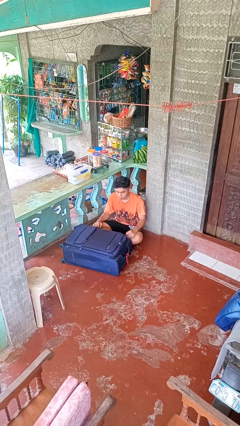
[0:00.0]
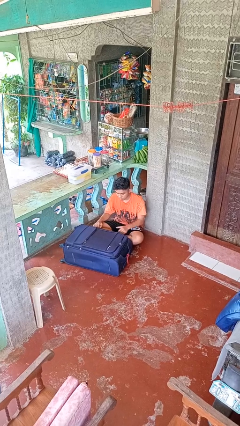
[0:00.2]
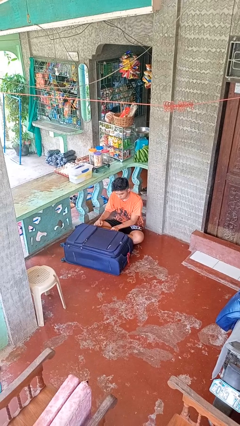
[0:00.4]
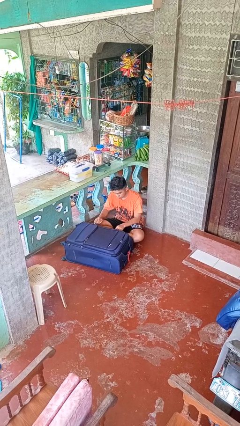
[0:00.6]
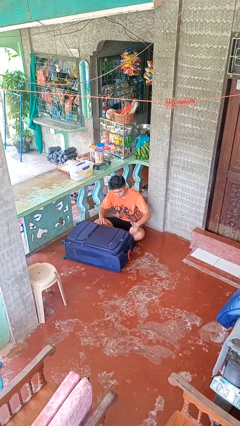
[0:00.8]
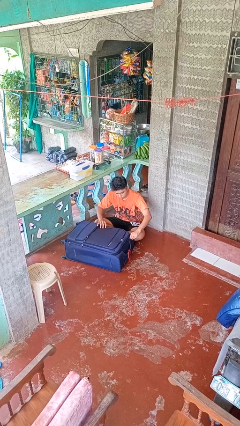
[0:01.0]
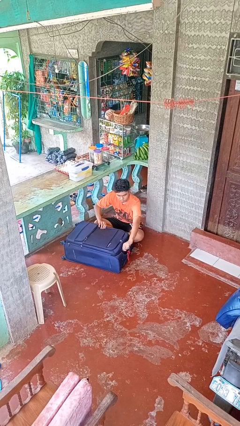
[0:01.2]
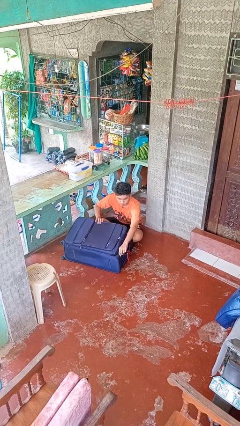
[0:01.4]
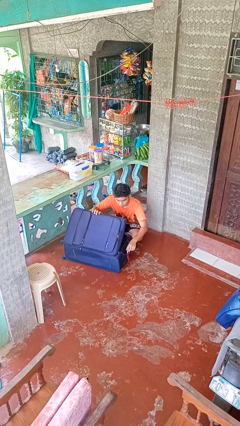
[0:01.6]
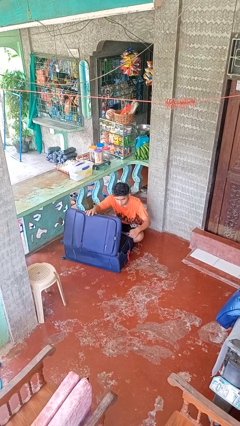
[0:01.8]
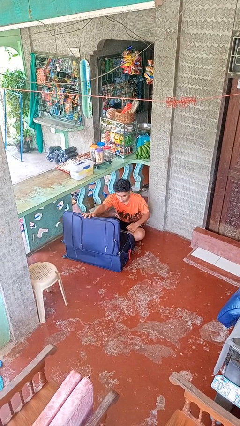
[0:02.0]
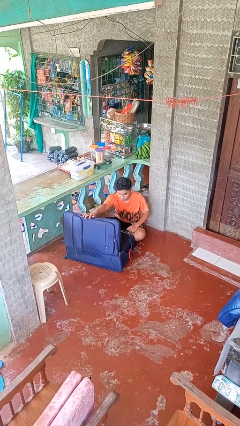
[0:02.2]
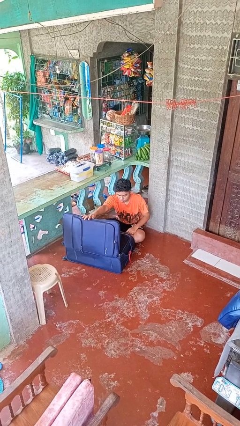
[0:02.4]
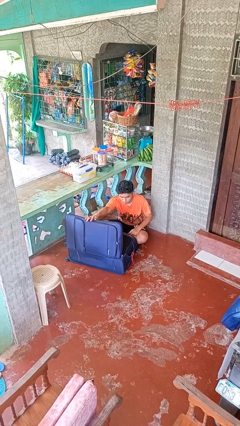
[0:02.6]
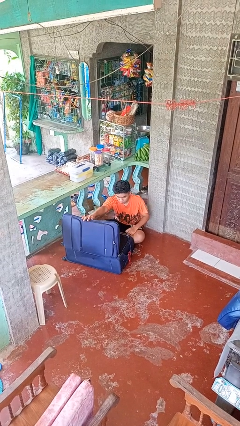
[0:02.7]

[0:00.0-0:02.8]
person opens suitcase

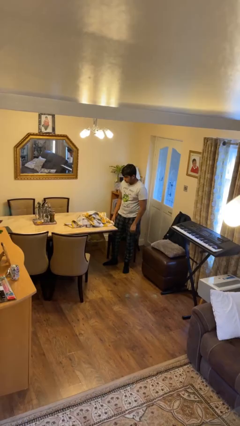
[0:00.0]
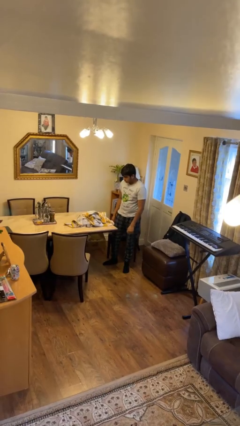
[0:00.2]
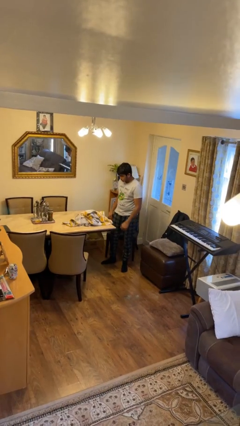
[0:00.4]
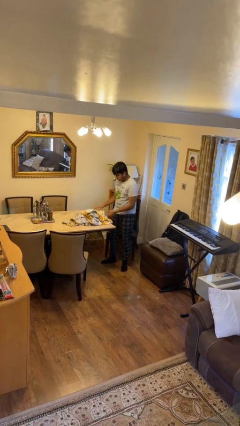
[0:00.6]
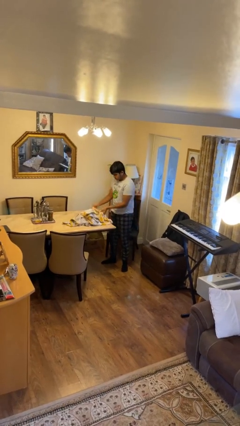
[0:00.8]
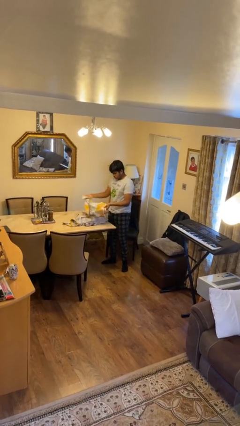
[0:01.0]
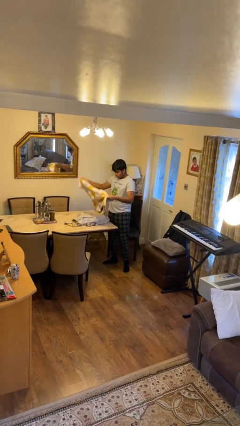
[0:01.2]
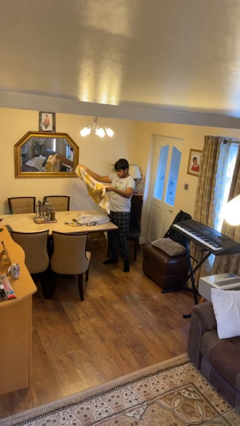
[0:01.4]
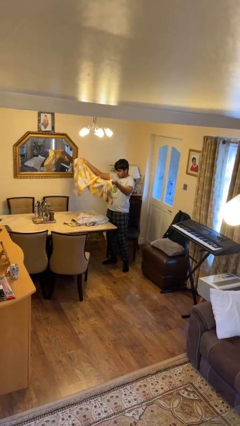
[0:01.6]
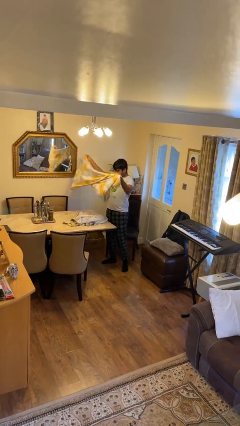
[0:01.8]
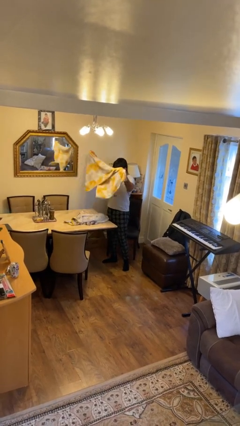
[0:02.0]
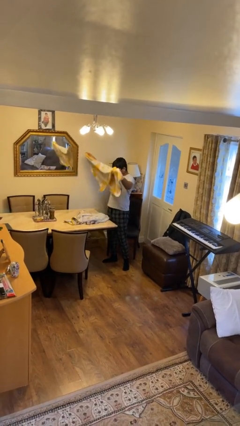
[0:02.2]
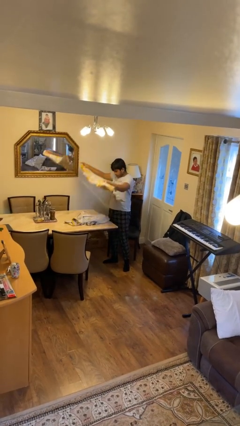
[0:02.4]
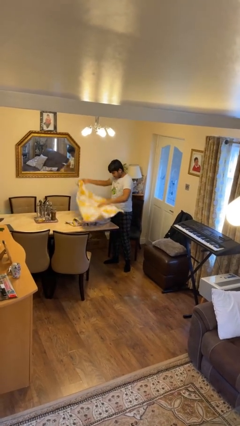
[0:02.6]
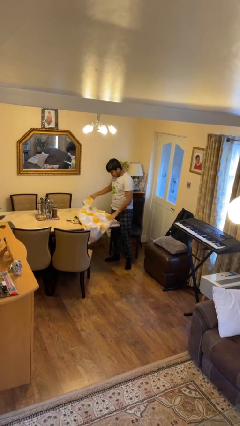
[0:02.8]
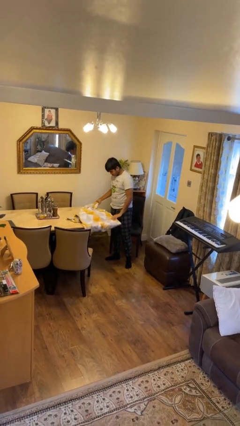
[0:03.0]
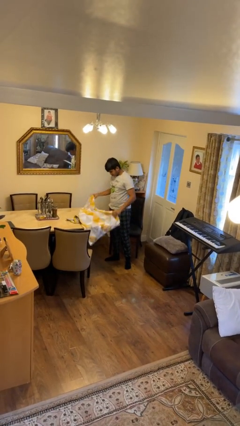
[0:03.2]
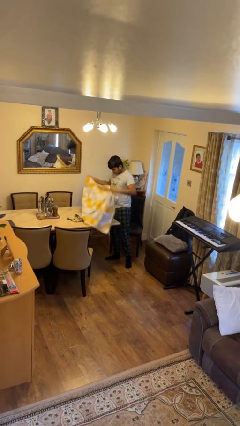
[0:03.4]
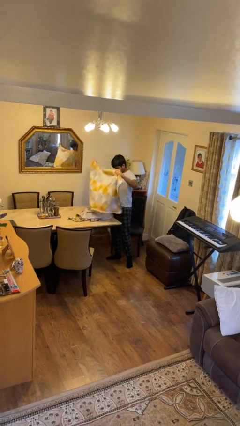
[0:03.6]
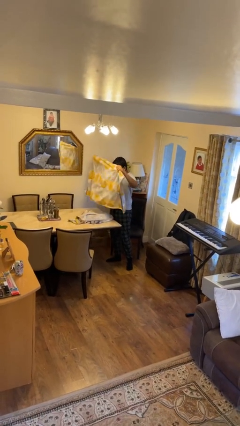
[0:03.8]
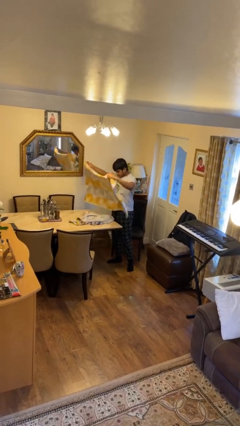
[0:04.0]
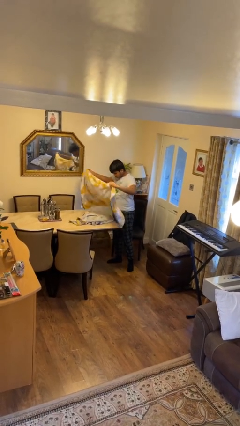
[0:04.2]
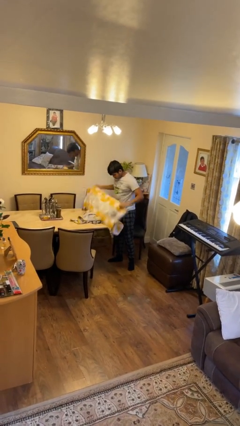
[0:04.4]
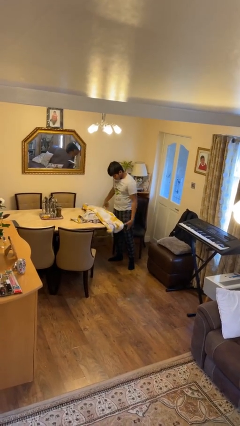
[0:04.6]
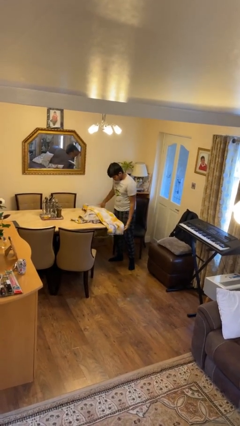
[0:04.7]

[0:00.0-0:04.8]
person folds towel

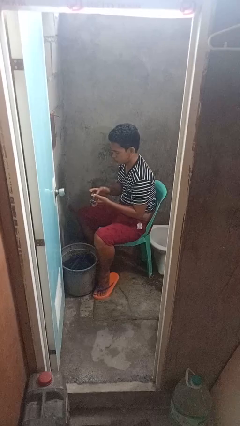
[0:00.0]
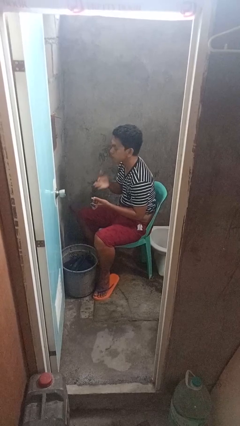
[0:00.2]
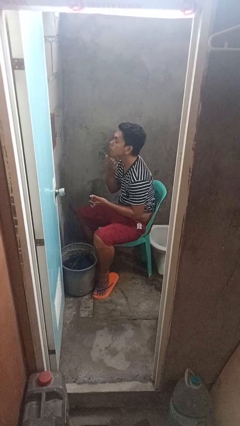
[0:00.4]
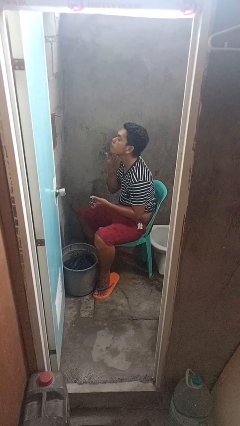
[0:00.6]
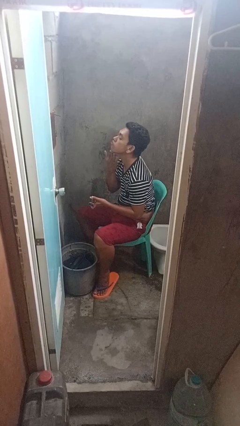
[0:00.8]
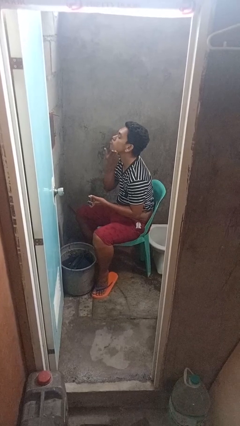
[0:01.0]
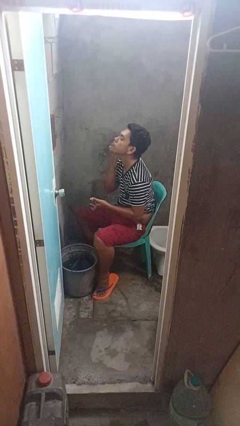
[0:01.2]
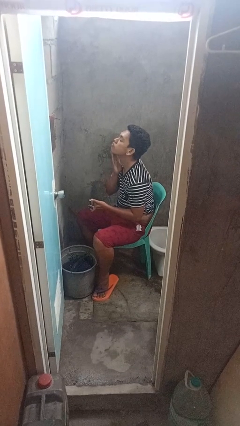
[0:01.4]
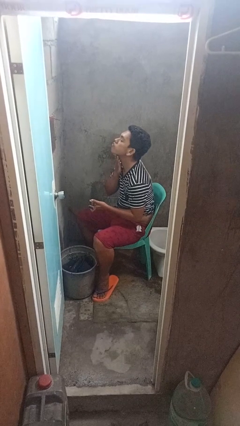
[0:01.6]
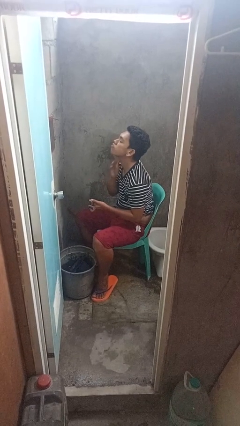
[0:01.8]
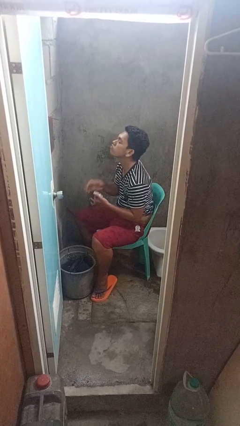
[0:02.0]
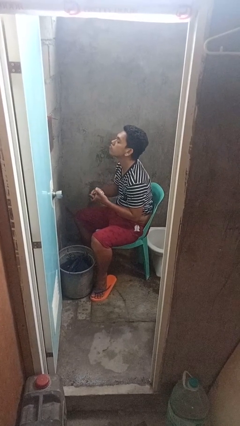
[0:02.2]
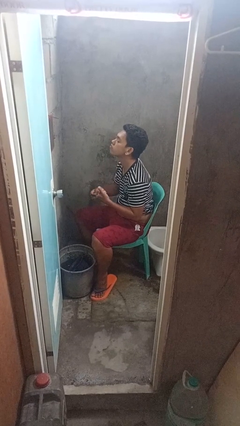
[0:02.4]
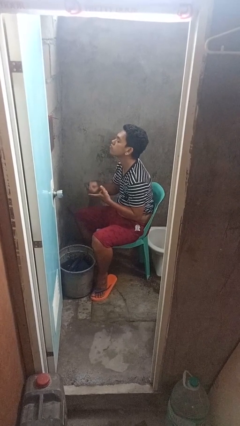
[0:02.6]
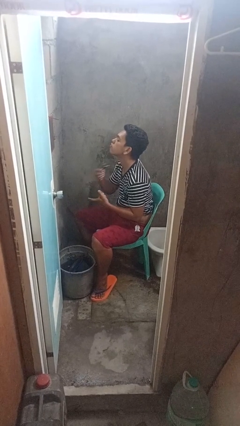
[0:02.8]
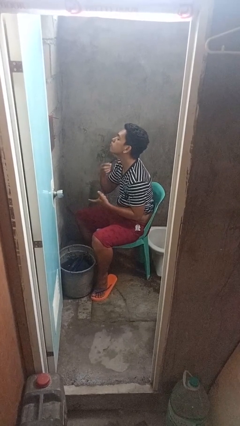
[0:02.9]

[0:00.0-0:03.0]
person applies shaving cream

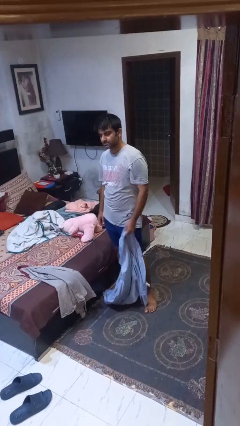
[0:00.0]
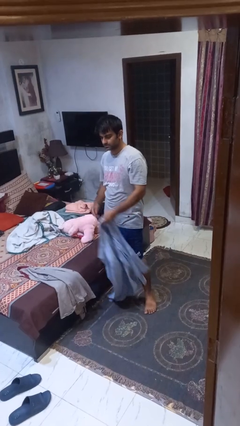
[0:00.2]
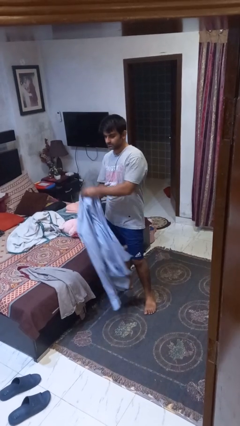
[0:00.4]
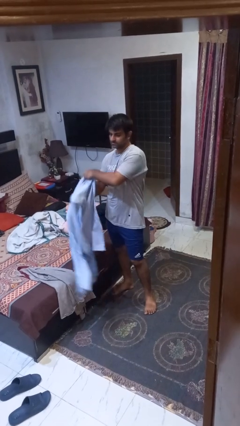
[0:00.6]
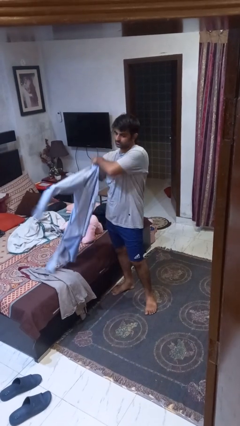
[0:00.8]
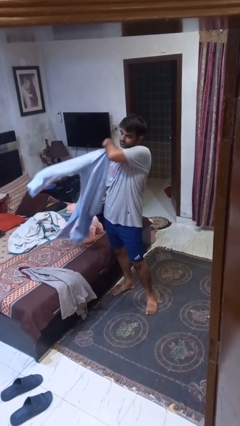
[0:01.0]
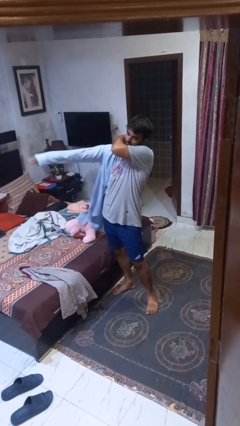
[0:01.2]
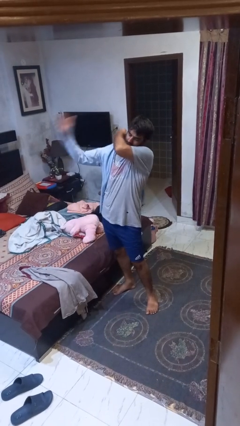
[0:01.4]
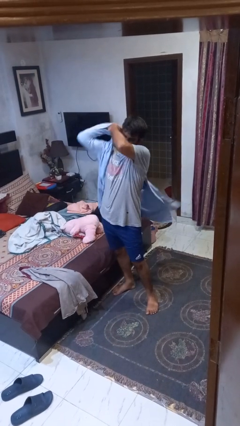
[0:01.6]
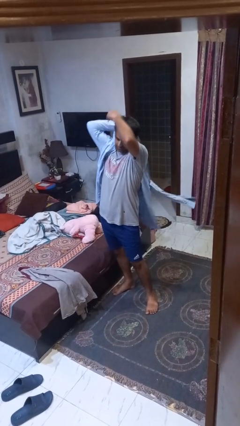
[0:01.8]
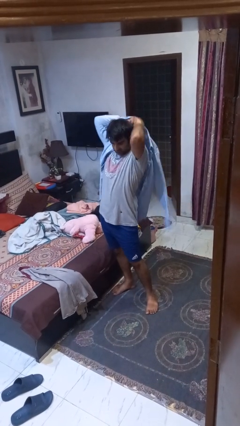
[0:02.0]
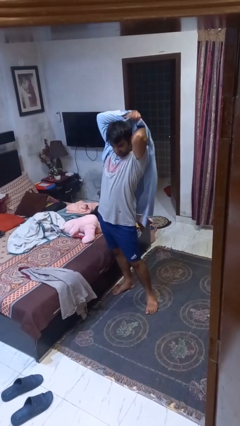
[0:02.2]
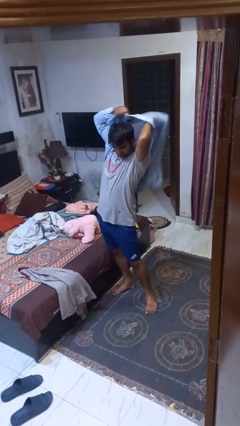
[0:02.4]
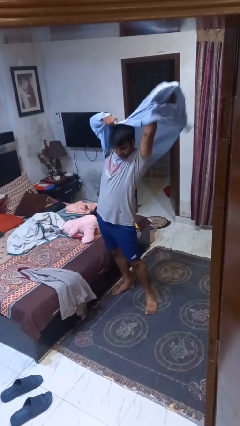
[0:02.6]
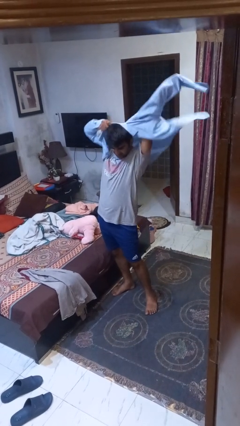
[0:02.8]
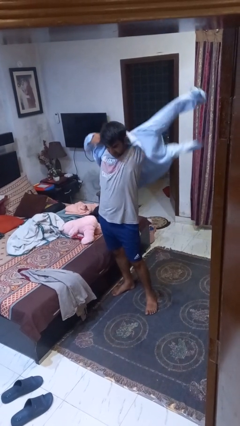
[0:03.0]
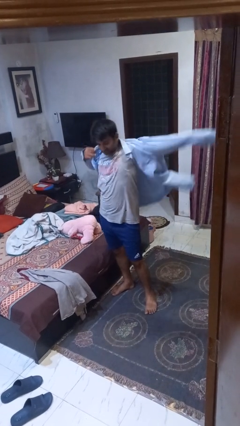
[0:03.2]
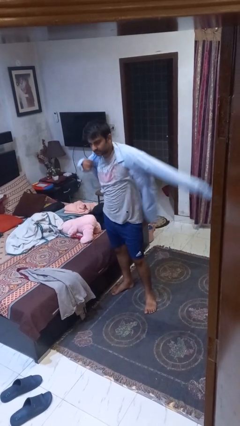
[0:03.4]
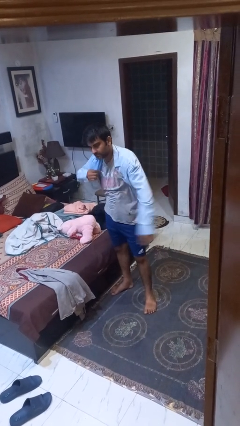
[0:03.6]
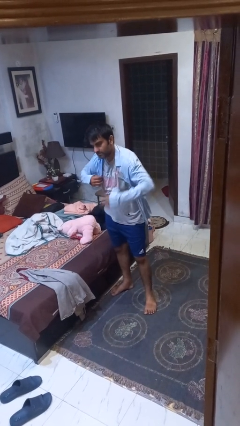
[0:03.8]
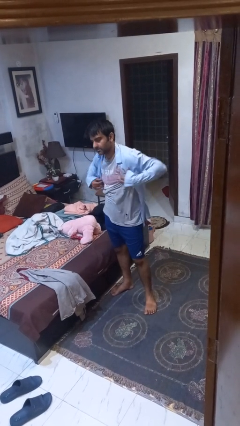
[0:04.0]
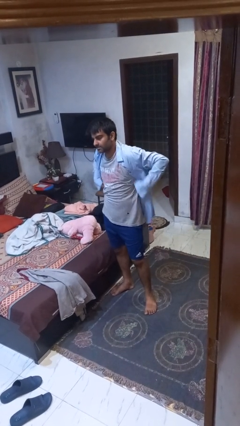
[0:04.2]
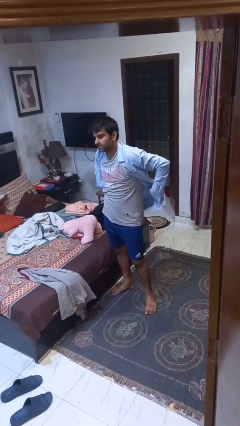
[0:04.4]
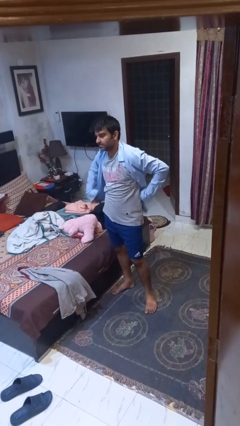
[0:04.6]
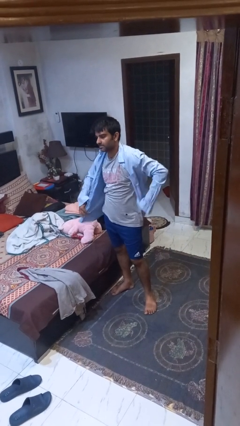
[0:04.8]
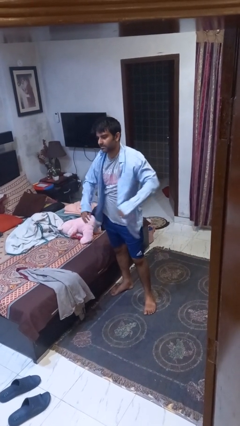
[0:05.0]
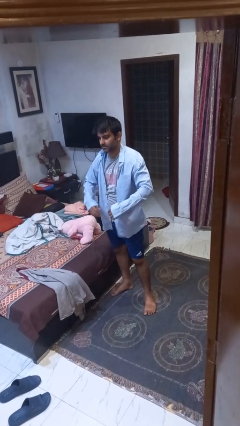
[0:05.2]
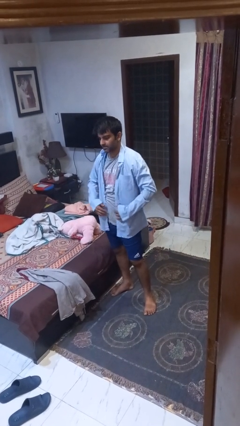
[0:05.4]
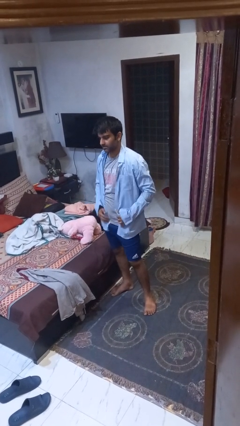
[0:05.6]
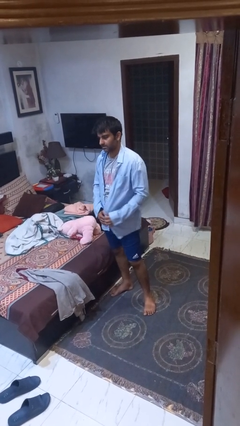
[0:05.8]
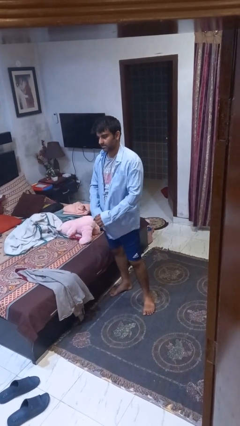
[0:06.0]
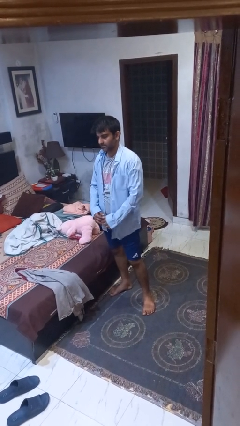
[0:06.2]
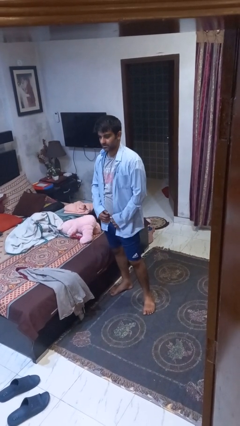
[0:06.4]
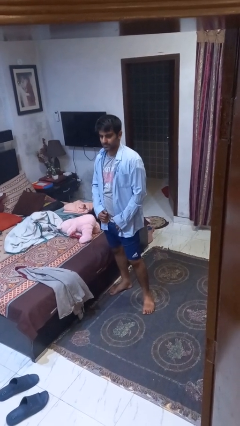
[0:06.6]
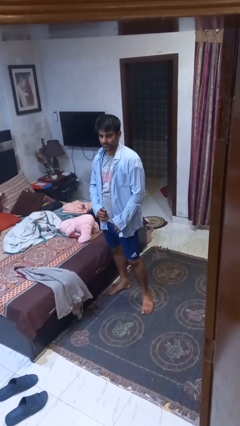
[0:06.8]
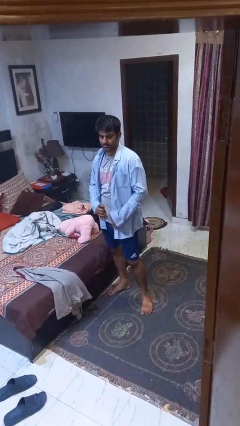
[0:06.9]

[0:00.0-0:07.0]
person puts on shirt

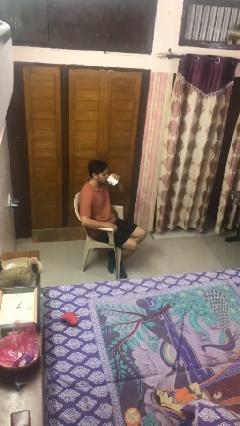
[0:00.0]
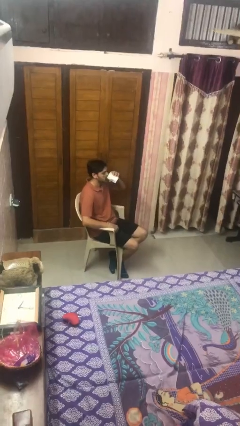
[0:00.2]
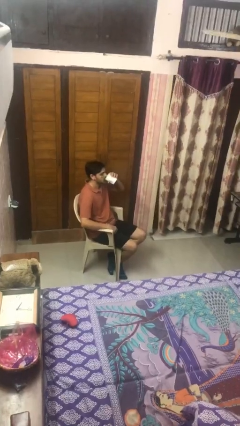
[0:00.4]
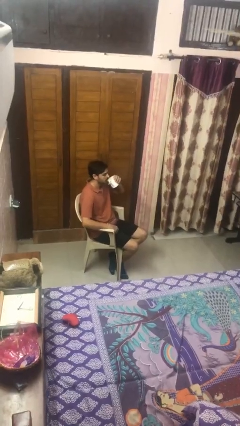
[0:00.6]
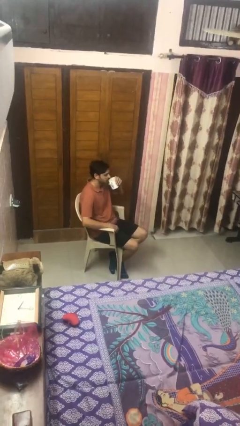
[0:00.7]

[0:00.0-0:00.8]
person drinks from mug
